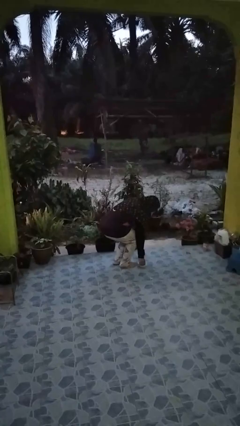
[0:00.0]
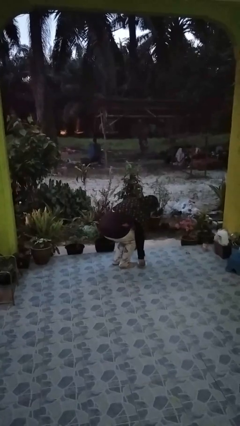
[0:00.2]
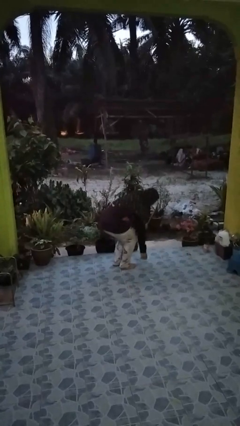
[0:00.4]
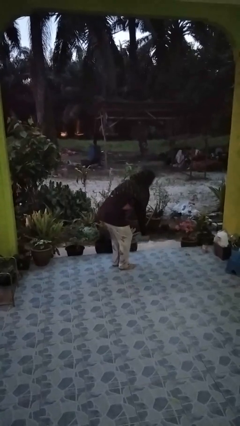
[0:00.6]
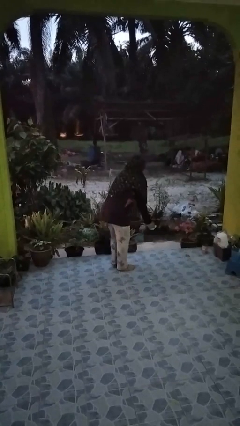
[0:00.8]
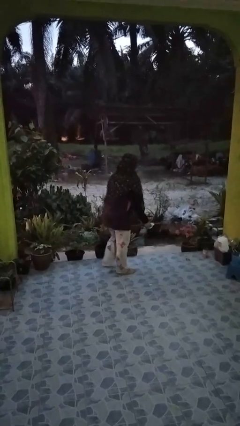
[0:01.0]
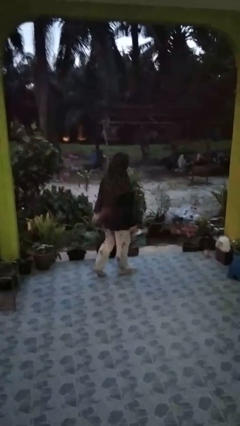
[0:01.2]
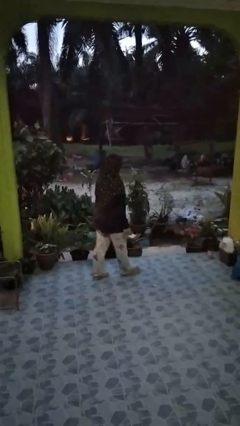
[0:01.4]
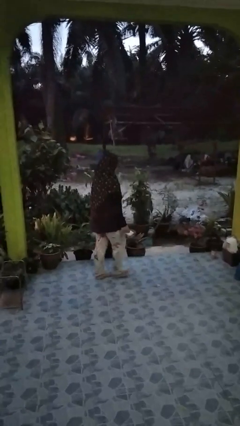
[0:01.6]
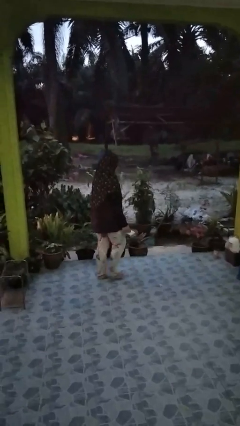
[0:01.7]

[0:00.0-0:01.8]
person picks up object from floor

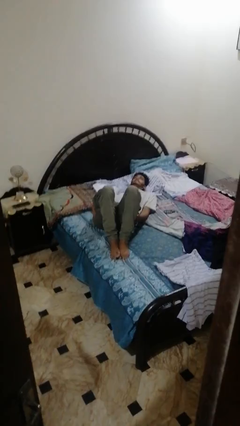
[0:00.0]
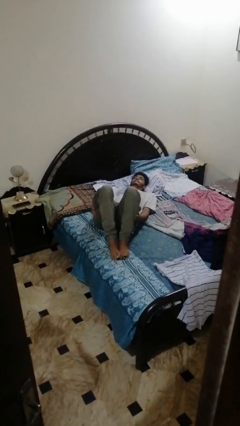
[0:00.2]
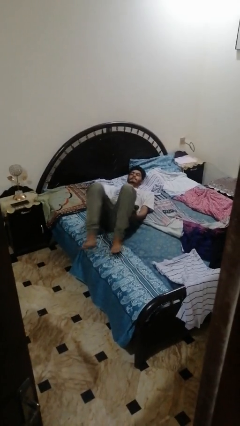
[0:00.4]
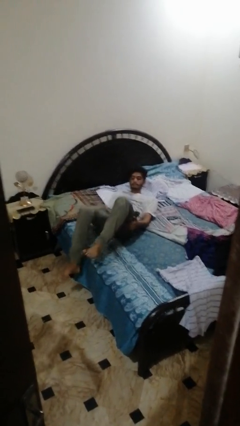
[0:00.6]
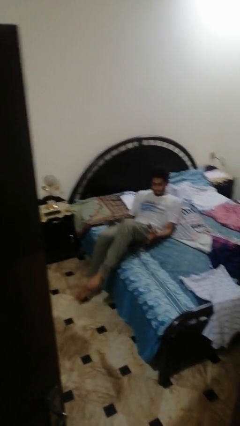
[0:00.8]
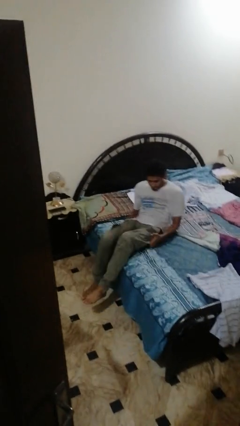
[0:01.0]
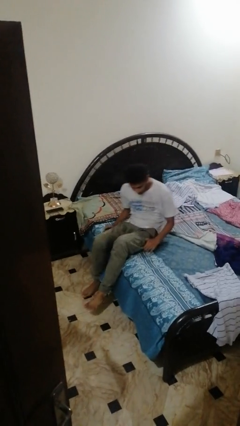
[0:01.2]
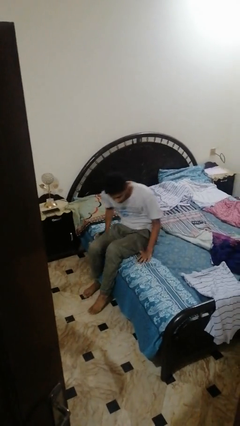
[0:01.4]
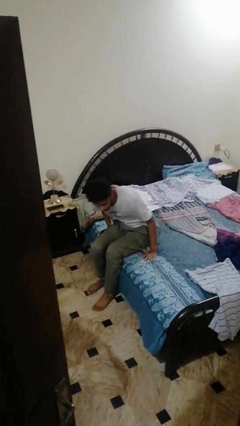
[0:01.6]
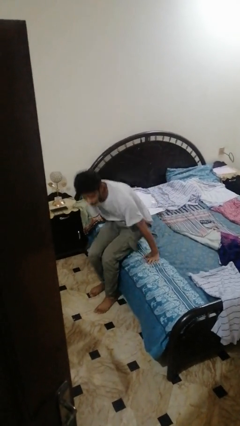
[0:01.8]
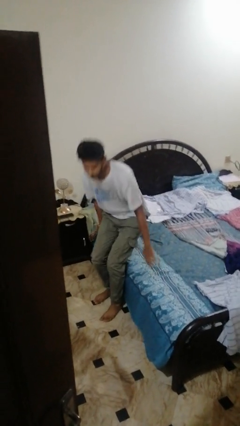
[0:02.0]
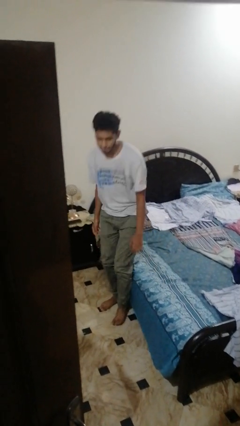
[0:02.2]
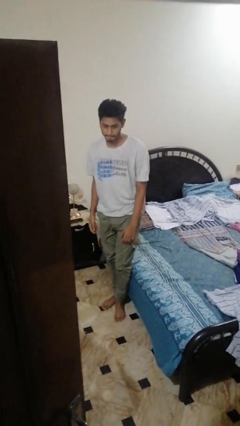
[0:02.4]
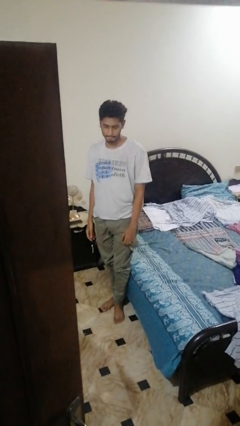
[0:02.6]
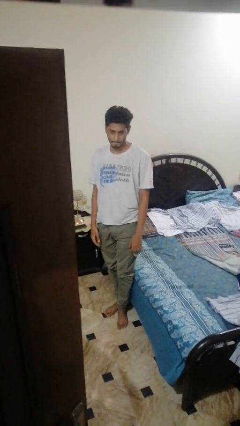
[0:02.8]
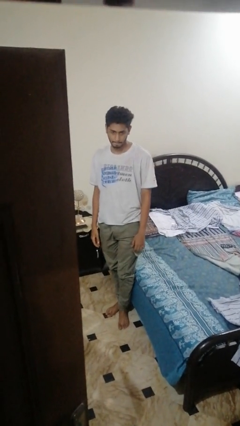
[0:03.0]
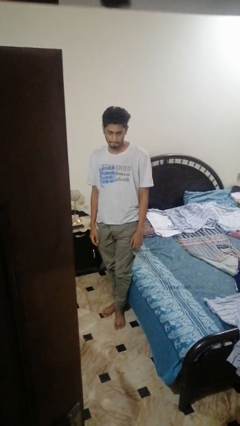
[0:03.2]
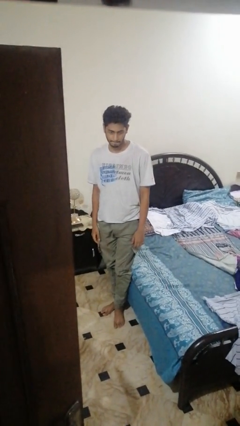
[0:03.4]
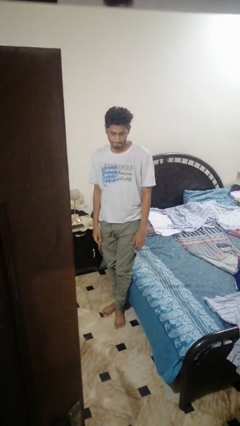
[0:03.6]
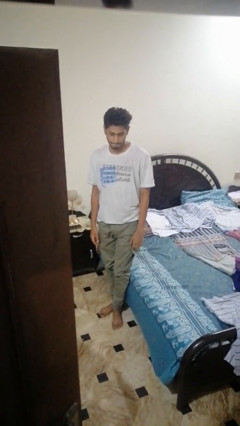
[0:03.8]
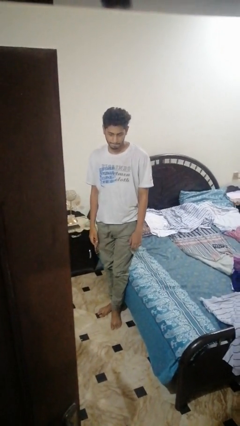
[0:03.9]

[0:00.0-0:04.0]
person stands up

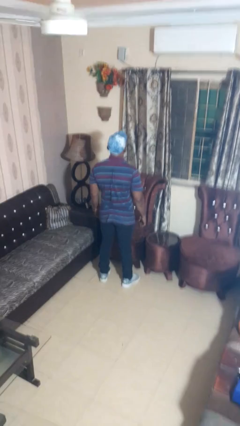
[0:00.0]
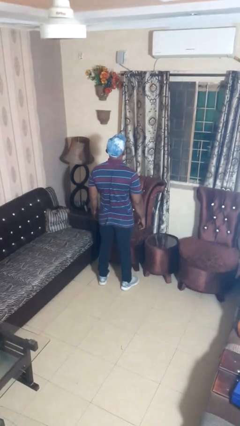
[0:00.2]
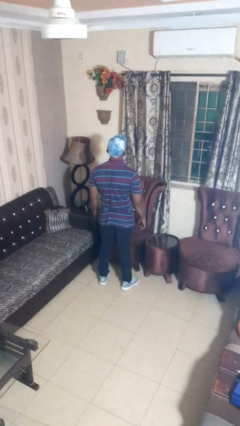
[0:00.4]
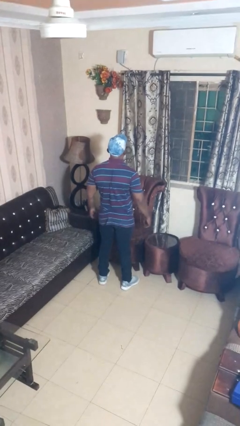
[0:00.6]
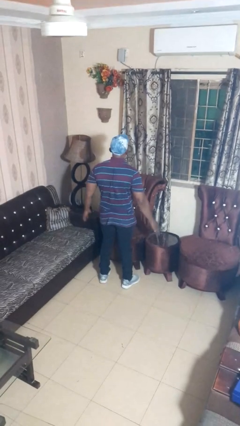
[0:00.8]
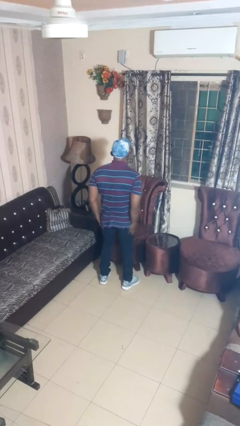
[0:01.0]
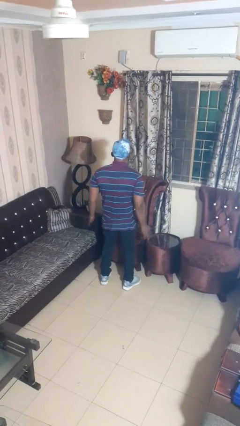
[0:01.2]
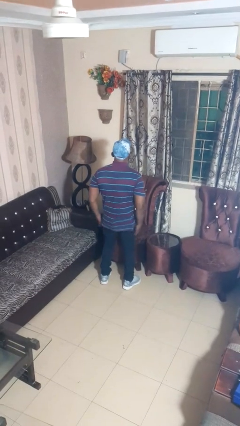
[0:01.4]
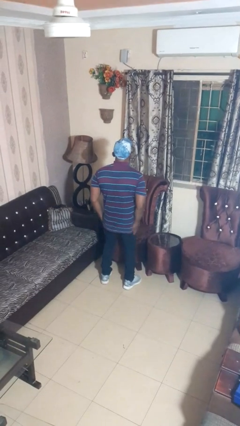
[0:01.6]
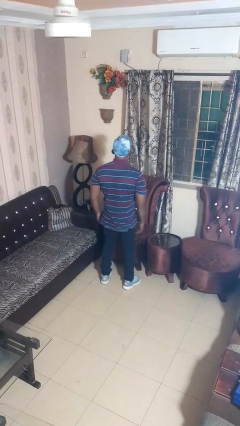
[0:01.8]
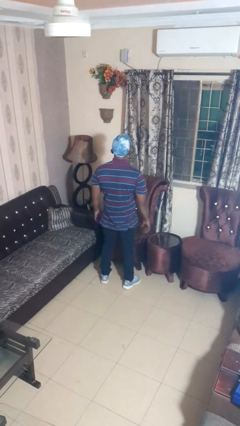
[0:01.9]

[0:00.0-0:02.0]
person slaps hands on thighs

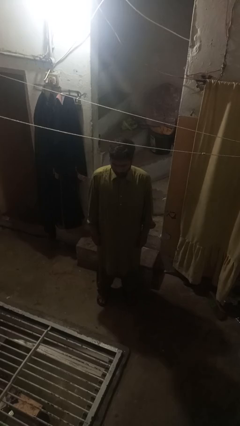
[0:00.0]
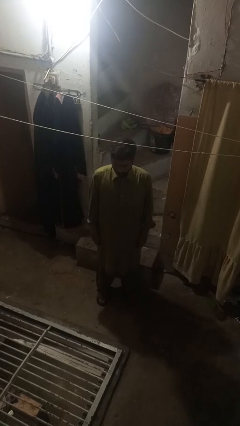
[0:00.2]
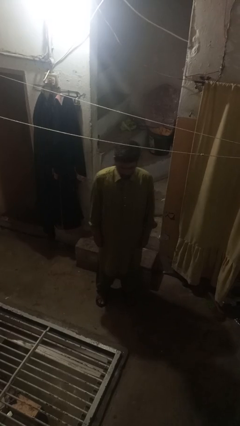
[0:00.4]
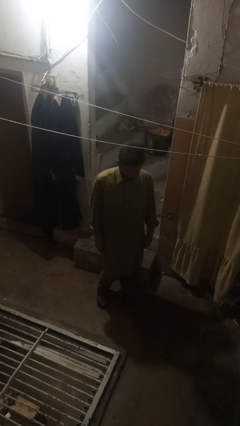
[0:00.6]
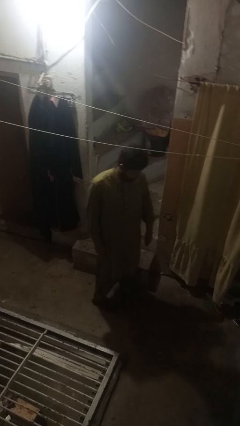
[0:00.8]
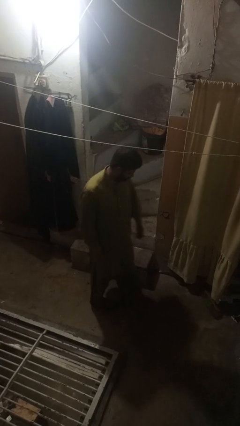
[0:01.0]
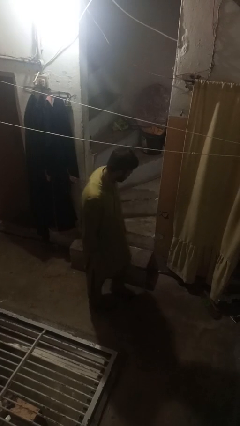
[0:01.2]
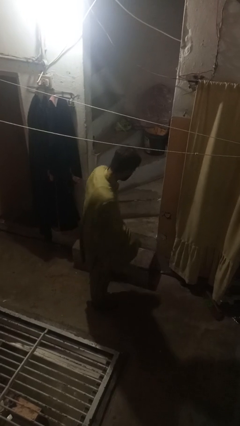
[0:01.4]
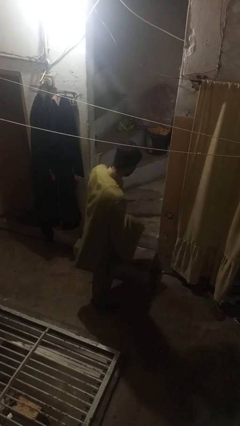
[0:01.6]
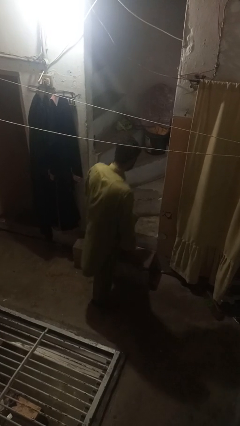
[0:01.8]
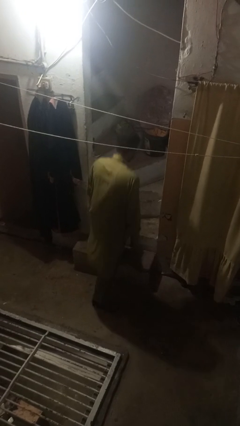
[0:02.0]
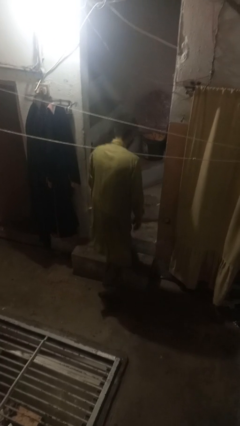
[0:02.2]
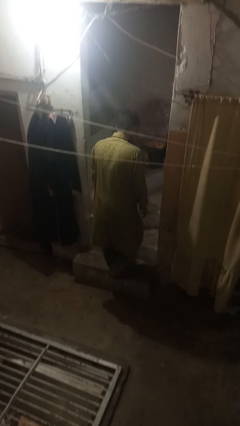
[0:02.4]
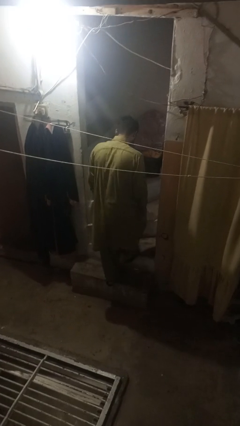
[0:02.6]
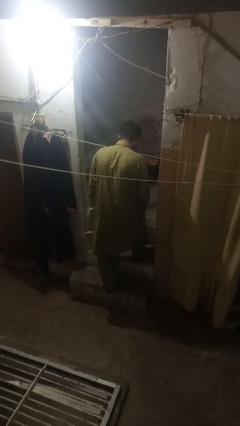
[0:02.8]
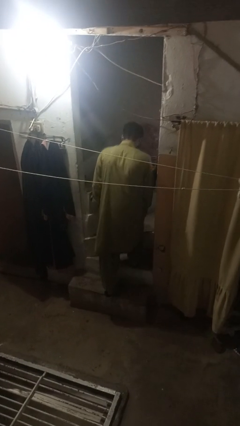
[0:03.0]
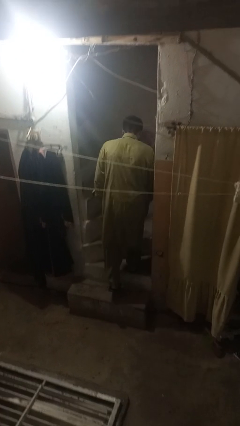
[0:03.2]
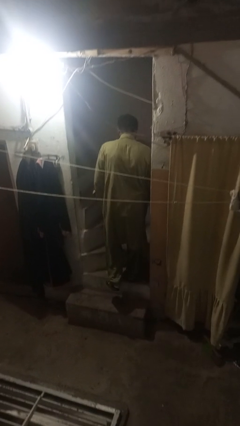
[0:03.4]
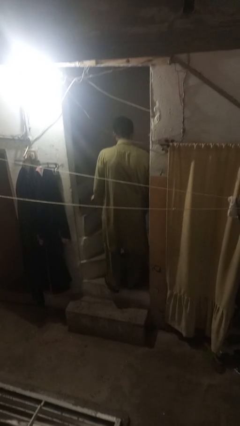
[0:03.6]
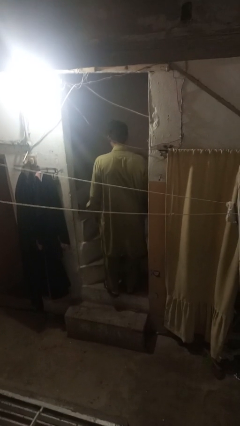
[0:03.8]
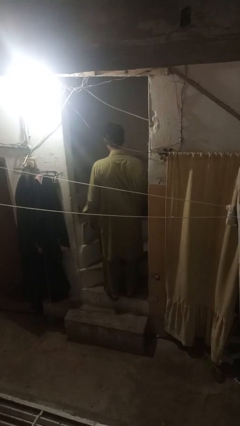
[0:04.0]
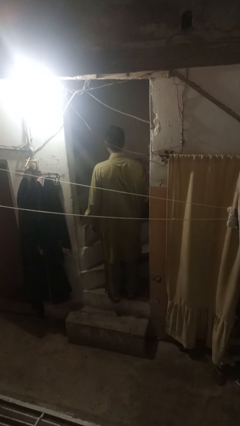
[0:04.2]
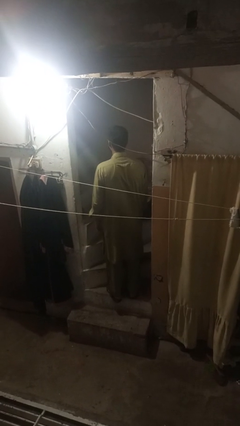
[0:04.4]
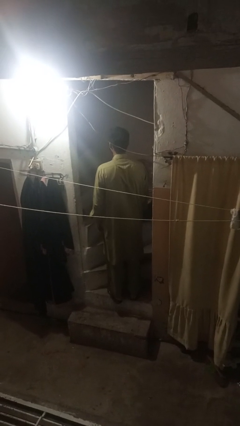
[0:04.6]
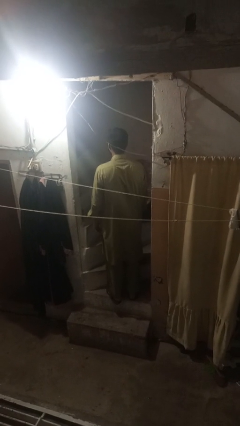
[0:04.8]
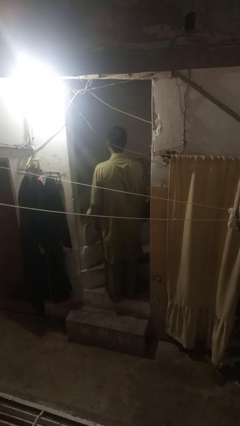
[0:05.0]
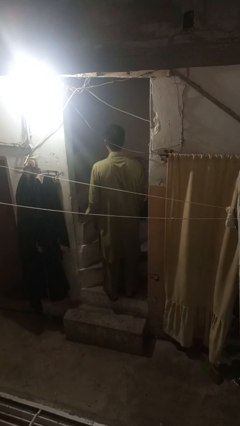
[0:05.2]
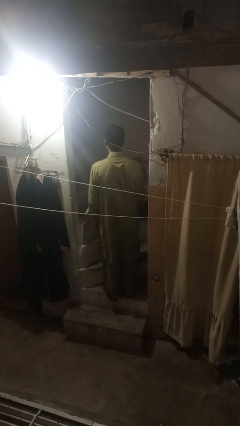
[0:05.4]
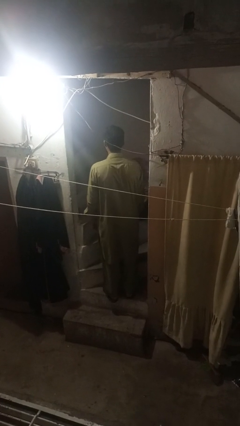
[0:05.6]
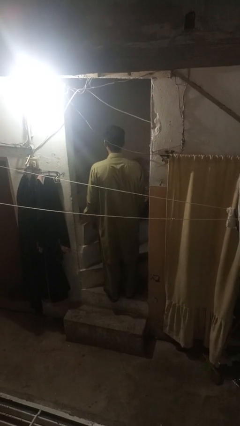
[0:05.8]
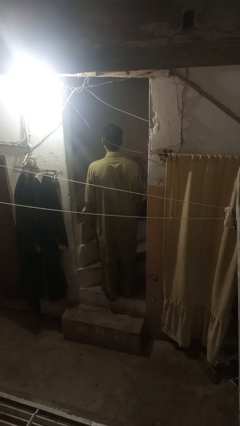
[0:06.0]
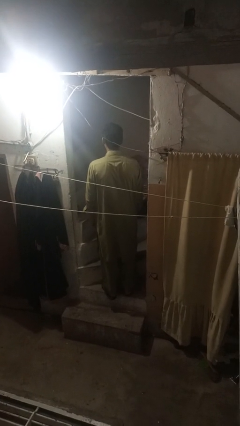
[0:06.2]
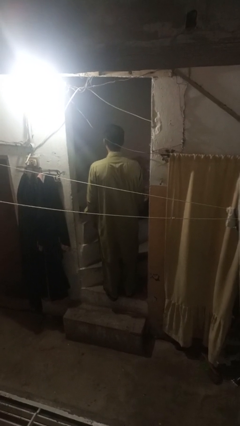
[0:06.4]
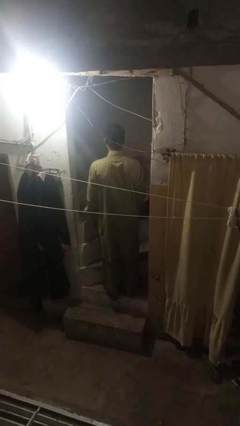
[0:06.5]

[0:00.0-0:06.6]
person climbs up stairs

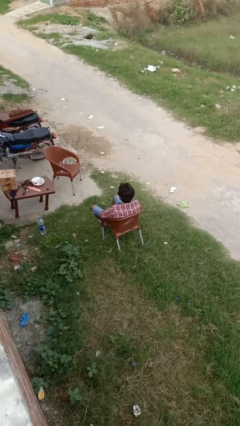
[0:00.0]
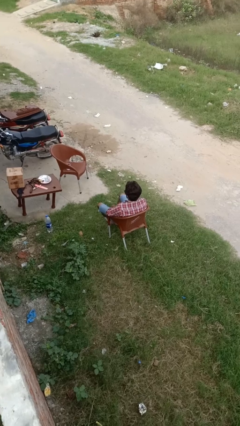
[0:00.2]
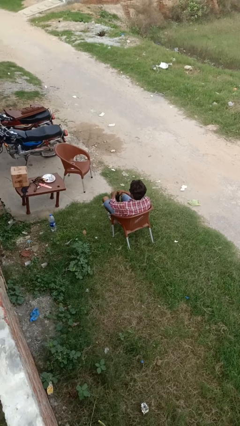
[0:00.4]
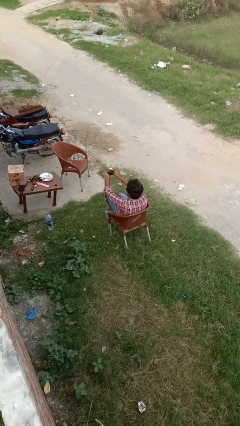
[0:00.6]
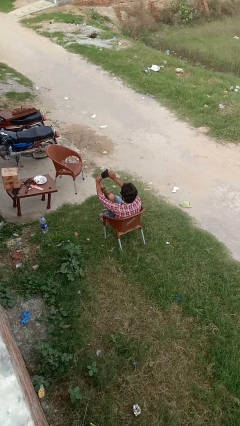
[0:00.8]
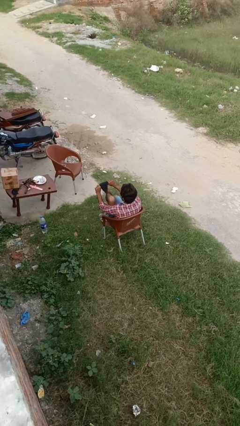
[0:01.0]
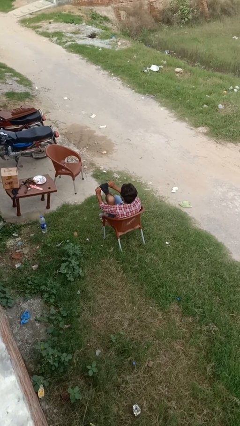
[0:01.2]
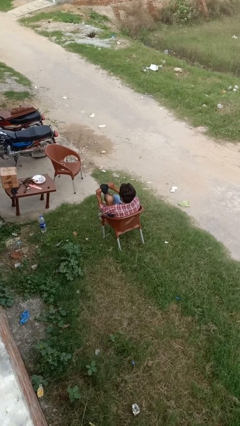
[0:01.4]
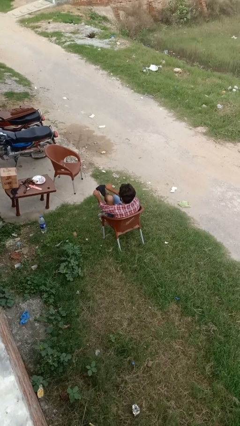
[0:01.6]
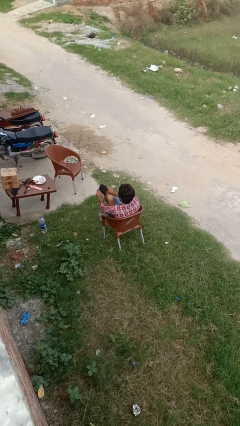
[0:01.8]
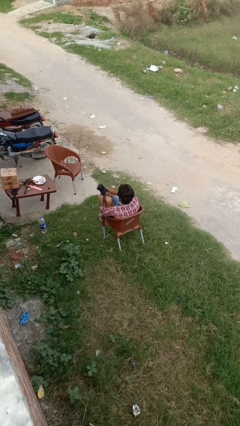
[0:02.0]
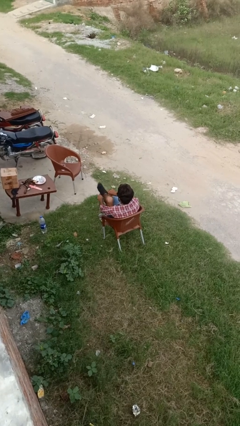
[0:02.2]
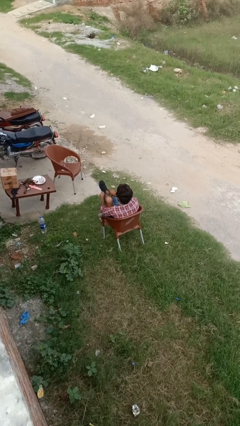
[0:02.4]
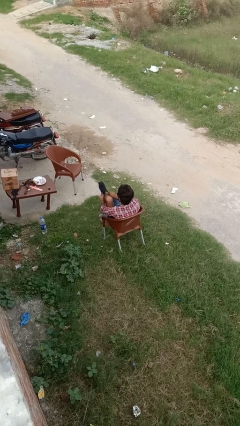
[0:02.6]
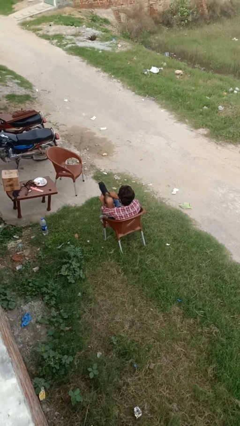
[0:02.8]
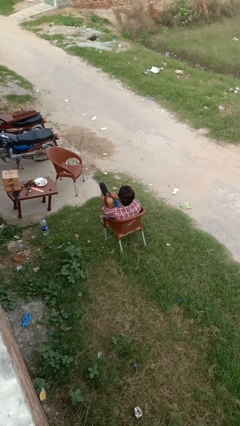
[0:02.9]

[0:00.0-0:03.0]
person puts on socks
